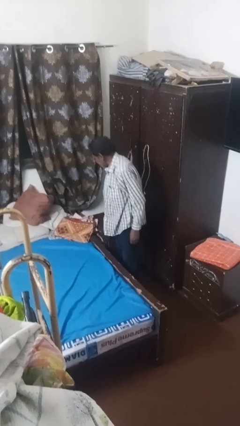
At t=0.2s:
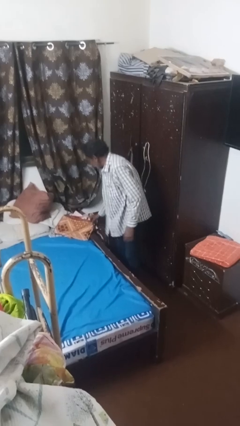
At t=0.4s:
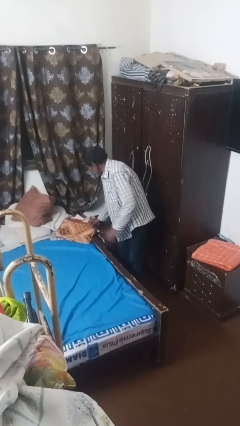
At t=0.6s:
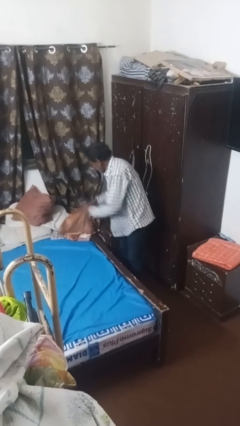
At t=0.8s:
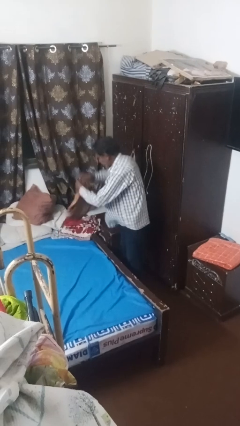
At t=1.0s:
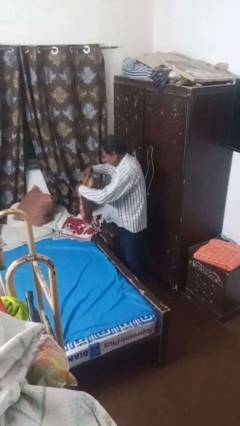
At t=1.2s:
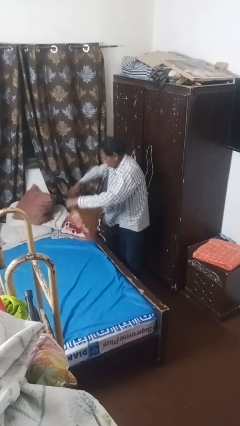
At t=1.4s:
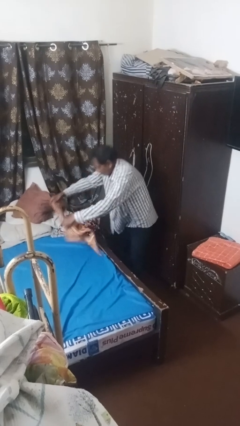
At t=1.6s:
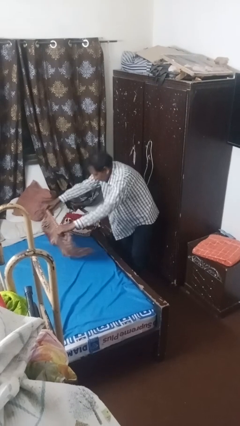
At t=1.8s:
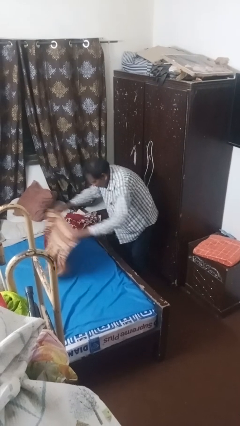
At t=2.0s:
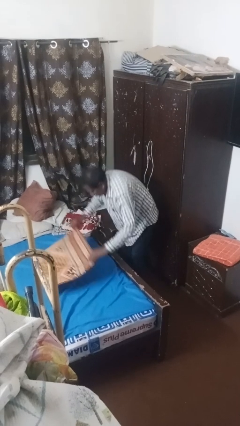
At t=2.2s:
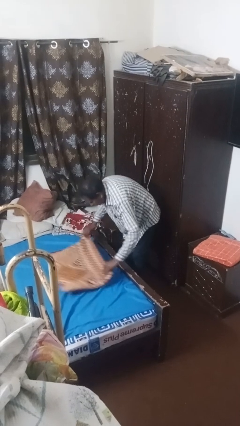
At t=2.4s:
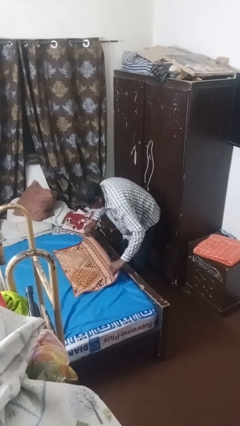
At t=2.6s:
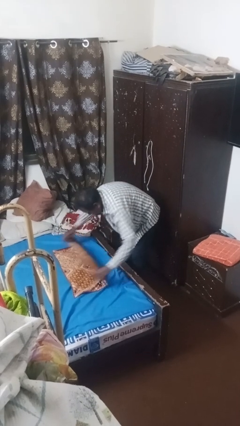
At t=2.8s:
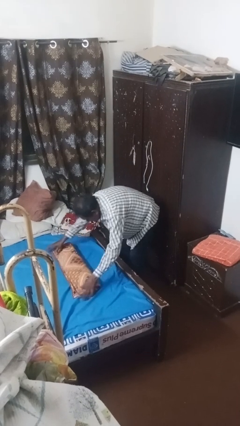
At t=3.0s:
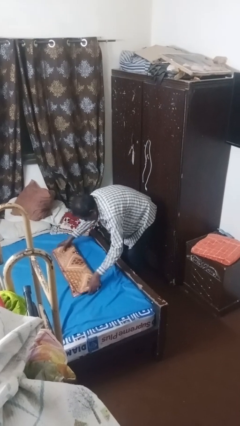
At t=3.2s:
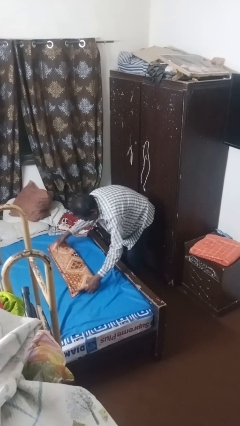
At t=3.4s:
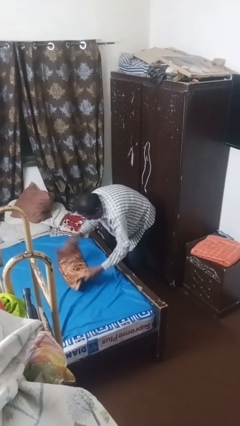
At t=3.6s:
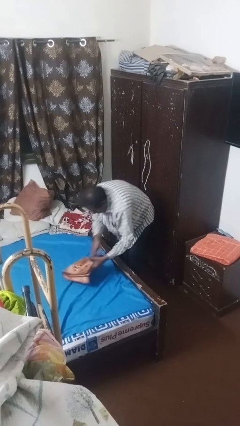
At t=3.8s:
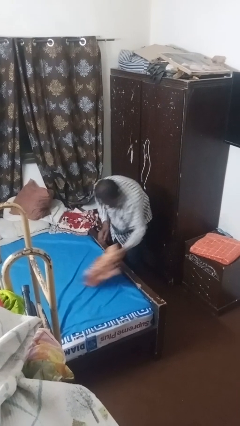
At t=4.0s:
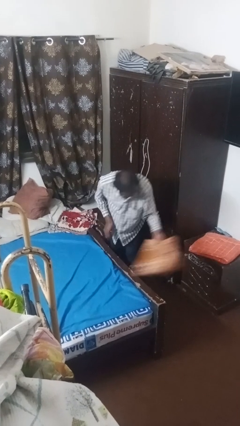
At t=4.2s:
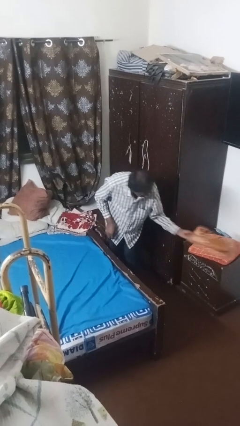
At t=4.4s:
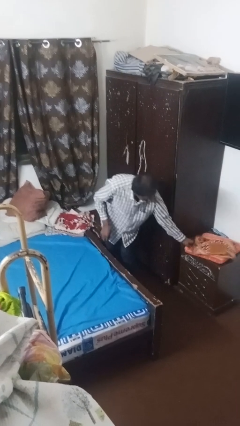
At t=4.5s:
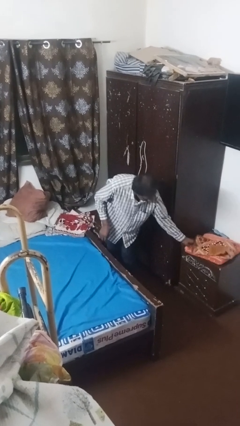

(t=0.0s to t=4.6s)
person folds towel

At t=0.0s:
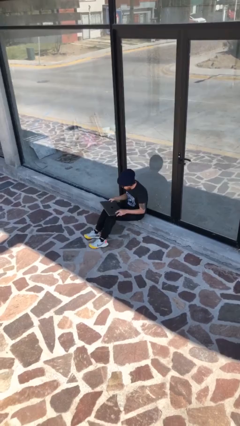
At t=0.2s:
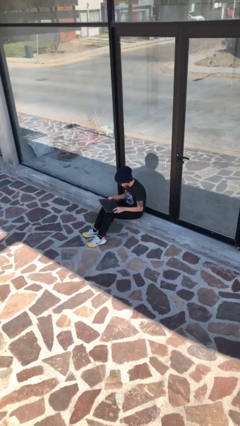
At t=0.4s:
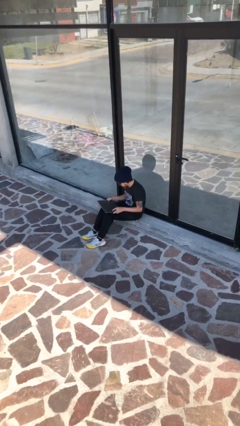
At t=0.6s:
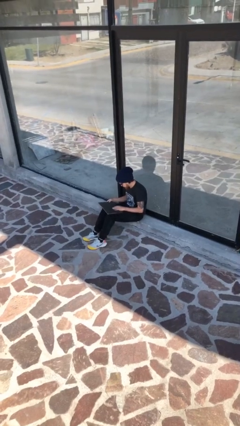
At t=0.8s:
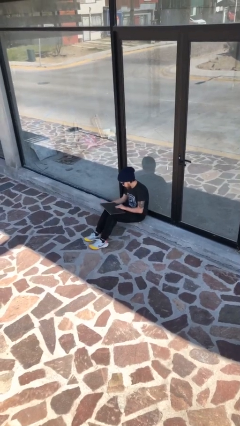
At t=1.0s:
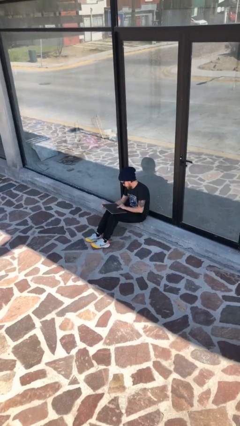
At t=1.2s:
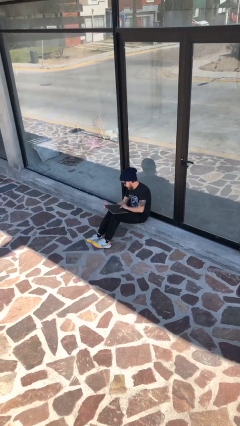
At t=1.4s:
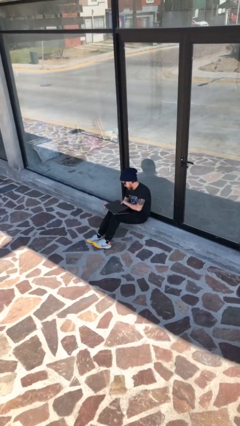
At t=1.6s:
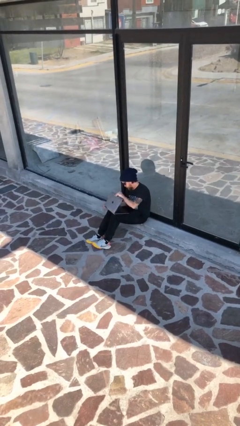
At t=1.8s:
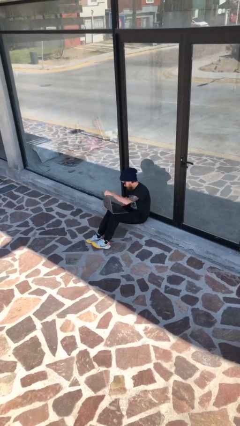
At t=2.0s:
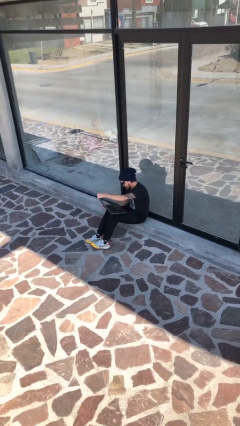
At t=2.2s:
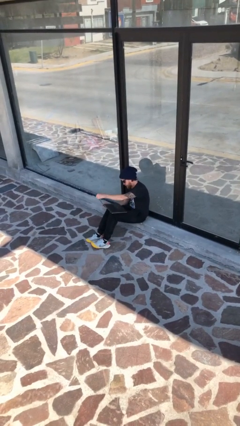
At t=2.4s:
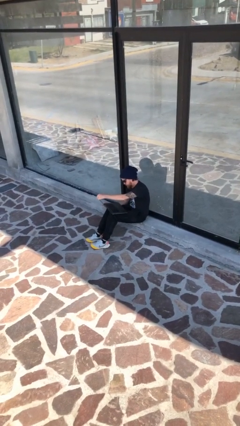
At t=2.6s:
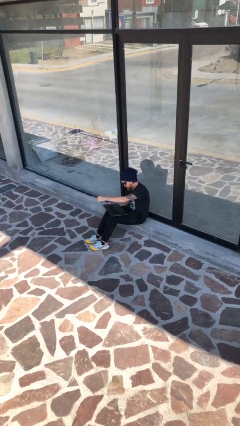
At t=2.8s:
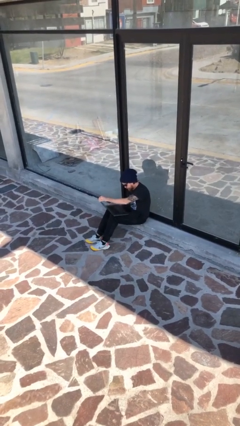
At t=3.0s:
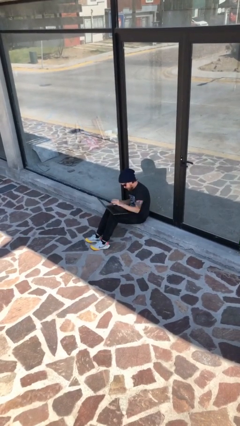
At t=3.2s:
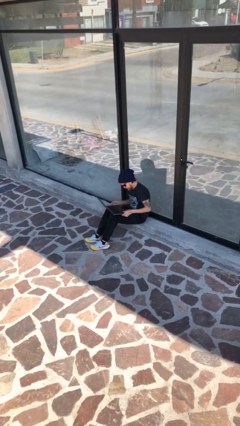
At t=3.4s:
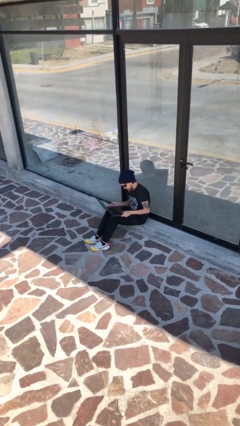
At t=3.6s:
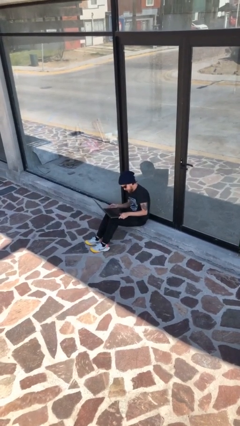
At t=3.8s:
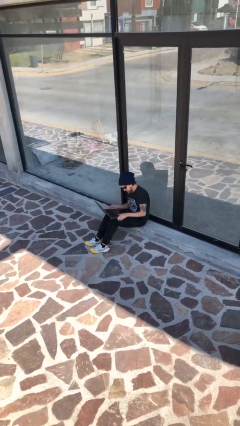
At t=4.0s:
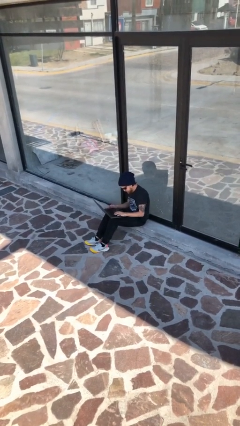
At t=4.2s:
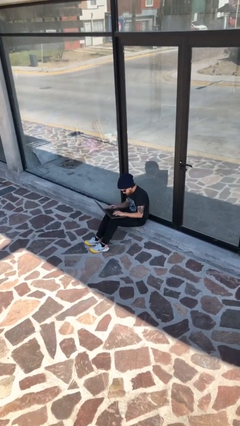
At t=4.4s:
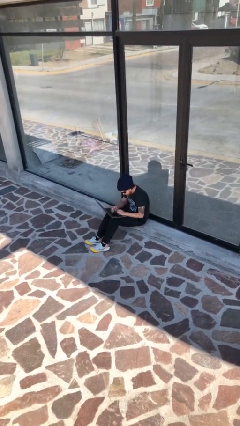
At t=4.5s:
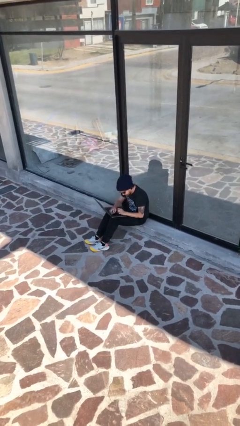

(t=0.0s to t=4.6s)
person interacts with laptop

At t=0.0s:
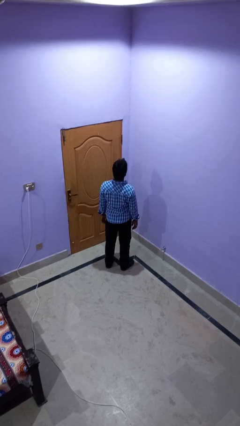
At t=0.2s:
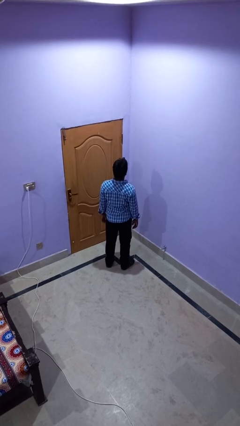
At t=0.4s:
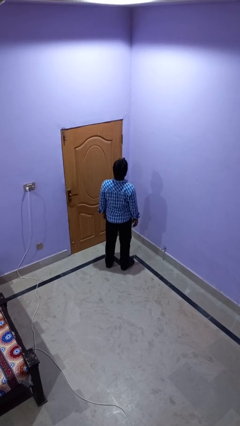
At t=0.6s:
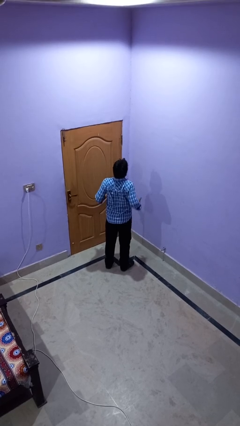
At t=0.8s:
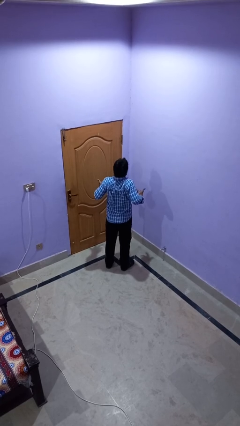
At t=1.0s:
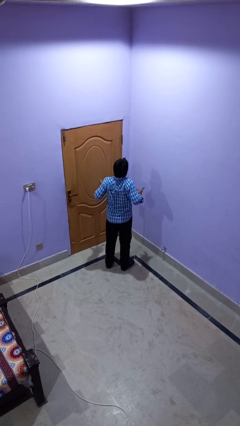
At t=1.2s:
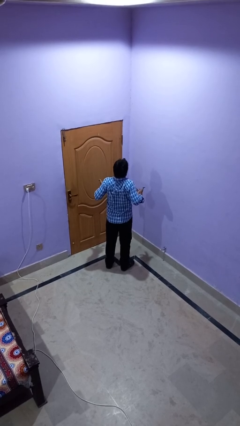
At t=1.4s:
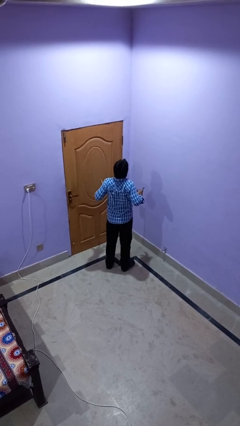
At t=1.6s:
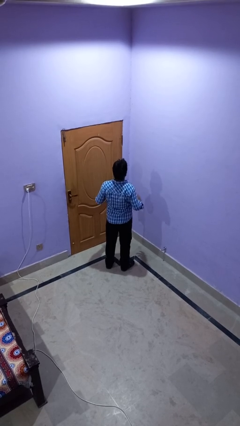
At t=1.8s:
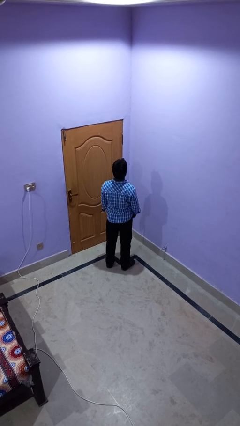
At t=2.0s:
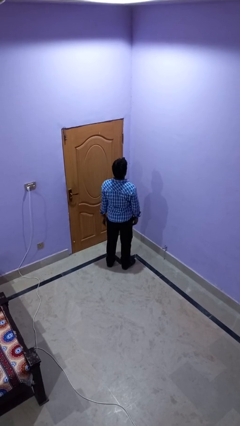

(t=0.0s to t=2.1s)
person shrugs

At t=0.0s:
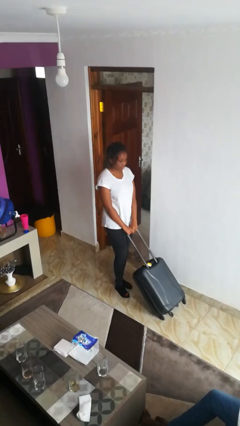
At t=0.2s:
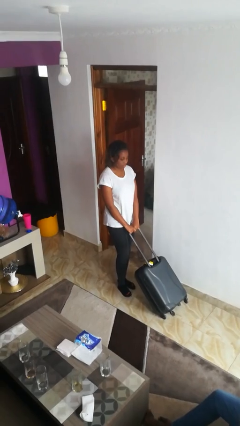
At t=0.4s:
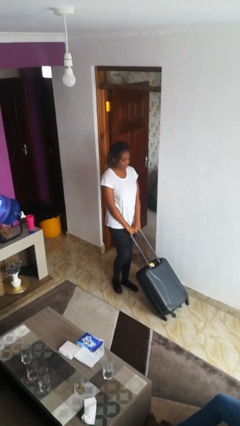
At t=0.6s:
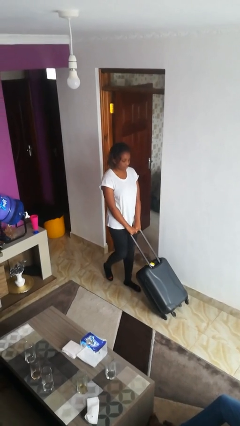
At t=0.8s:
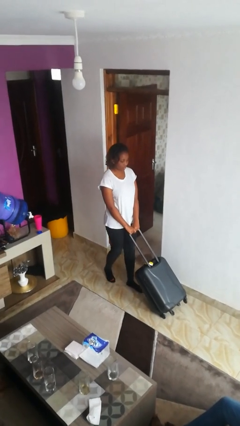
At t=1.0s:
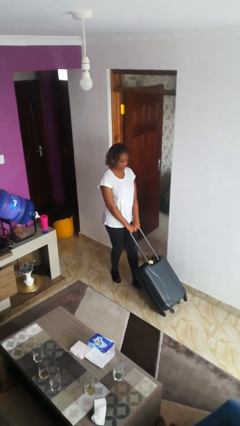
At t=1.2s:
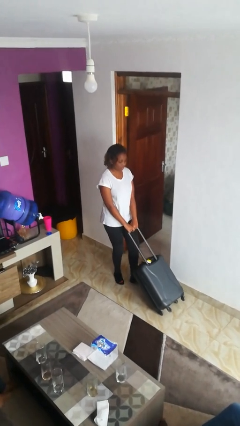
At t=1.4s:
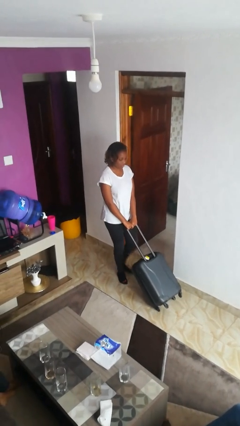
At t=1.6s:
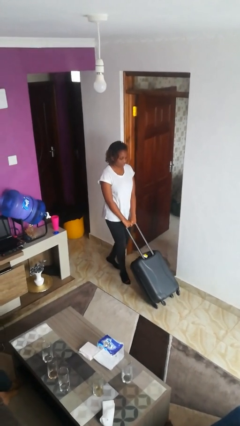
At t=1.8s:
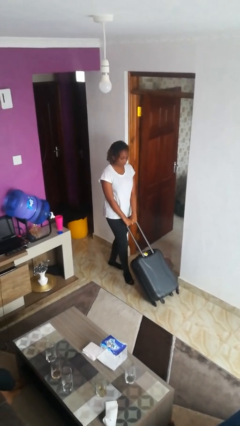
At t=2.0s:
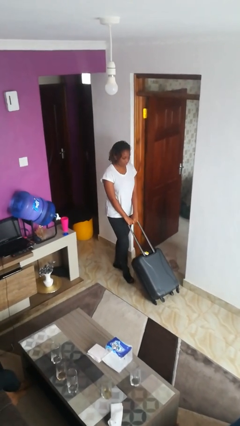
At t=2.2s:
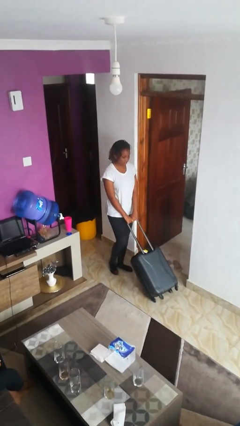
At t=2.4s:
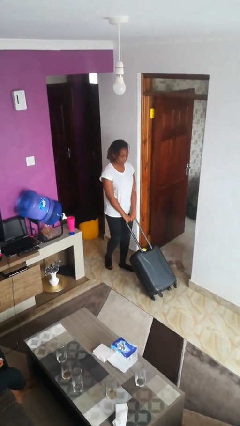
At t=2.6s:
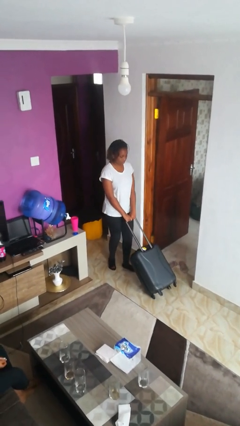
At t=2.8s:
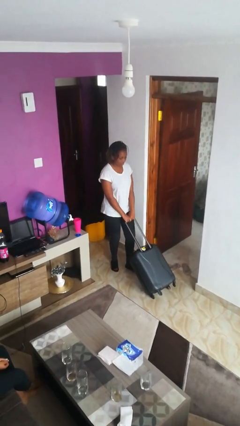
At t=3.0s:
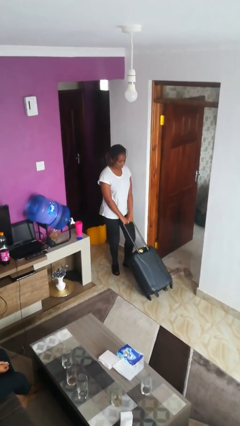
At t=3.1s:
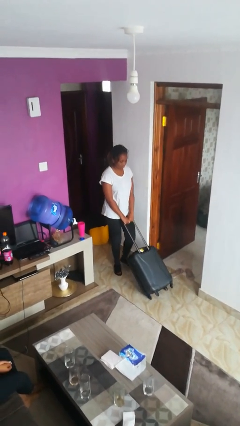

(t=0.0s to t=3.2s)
person pulls wheeled cart

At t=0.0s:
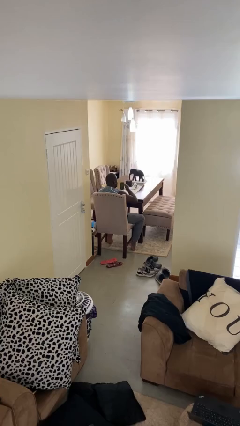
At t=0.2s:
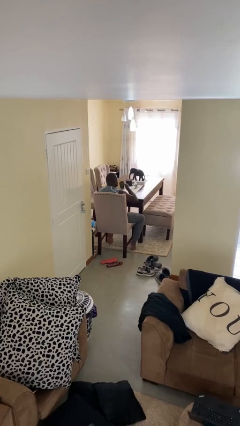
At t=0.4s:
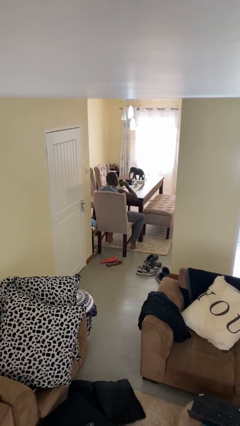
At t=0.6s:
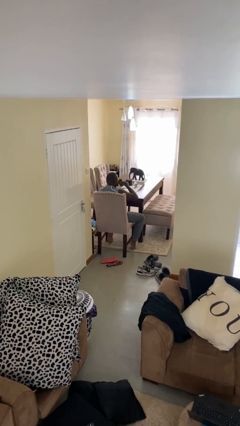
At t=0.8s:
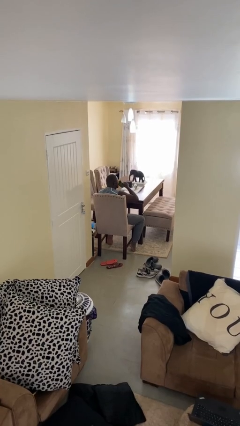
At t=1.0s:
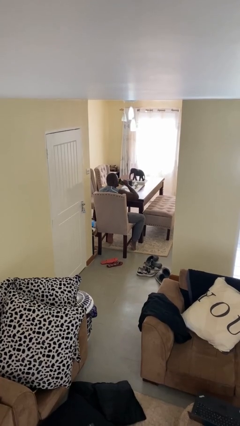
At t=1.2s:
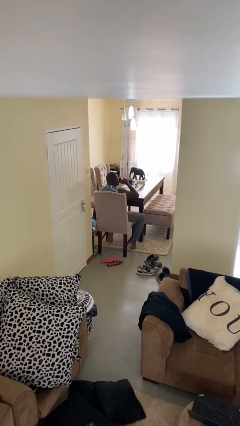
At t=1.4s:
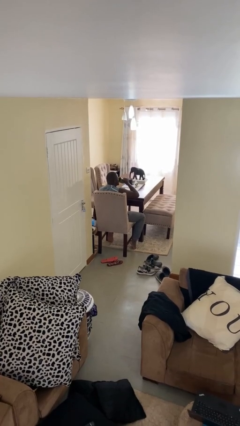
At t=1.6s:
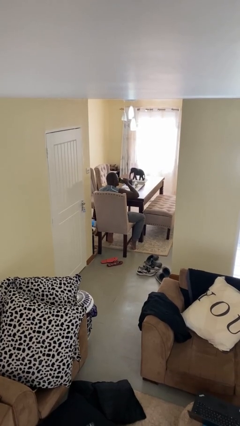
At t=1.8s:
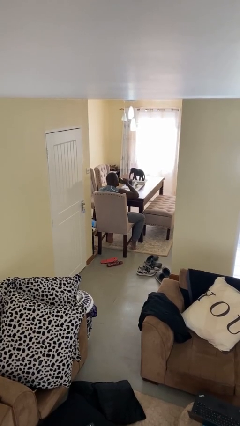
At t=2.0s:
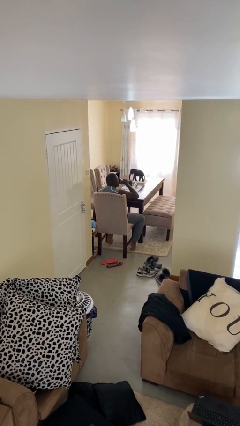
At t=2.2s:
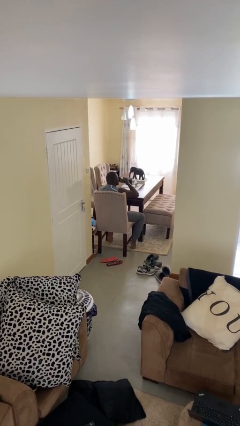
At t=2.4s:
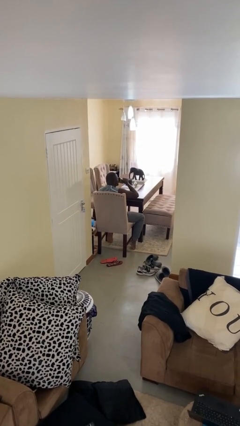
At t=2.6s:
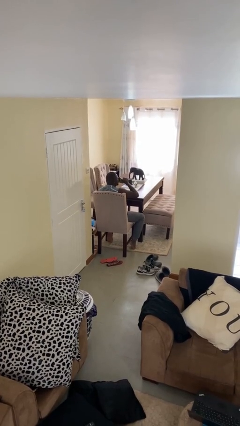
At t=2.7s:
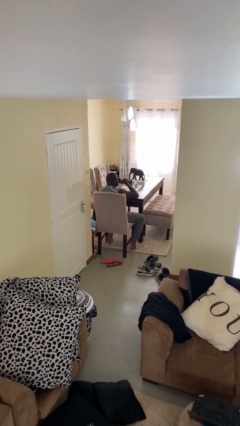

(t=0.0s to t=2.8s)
person drinks from mug

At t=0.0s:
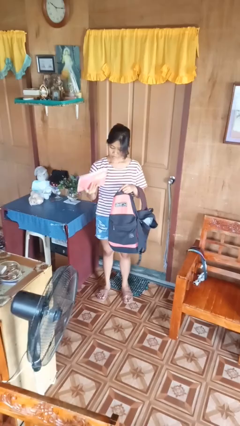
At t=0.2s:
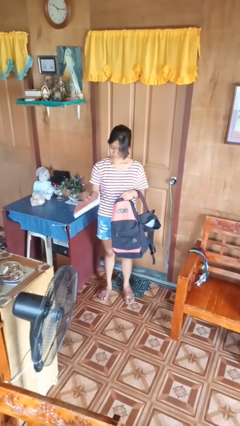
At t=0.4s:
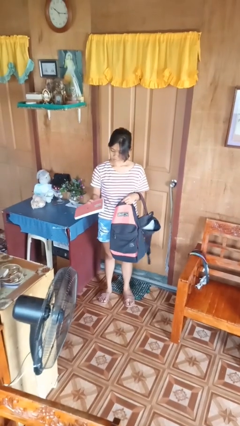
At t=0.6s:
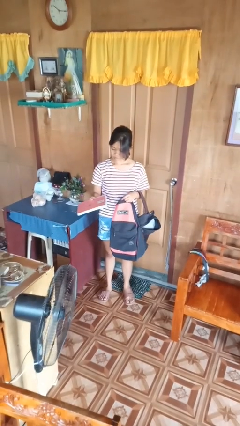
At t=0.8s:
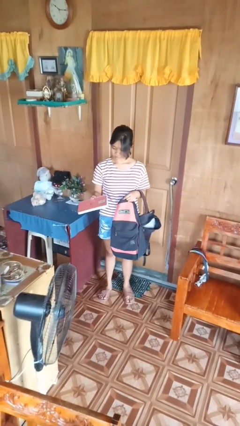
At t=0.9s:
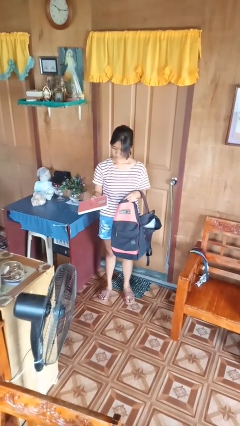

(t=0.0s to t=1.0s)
person takes object from backpack
